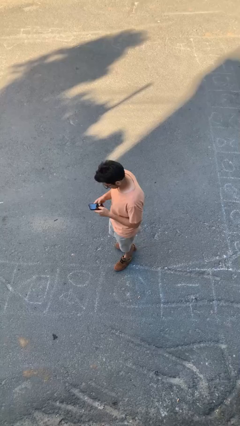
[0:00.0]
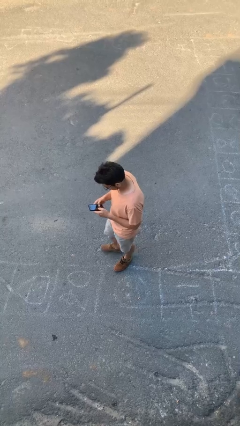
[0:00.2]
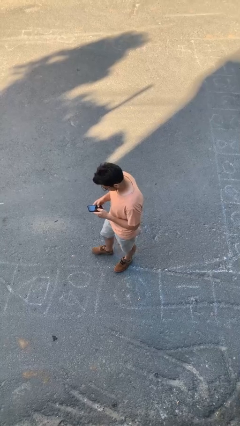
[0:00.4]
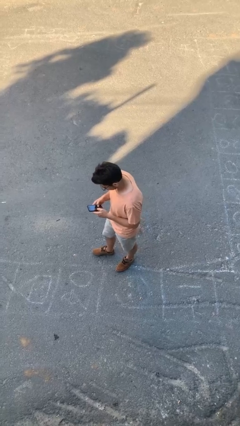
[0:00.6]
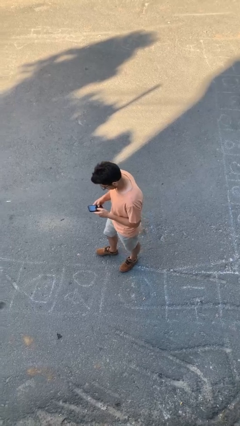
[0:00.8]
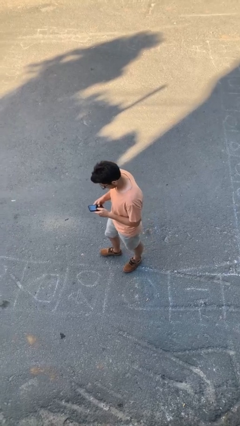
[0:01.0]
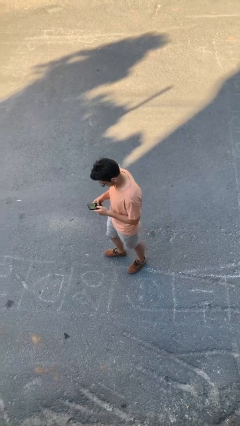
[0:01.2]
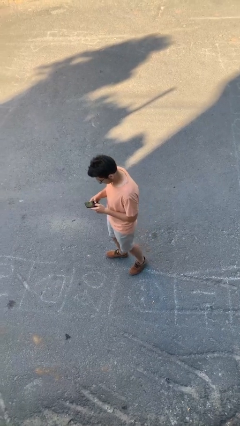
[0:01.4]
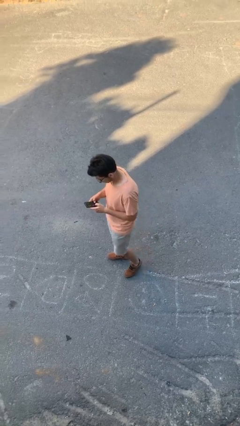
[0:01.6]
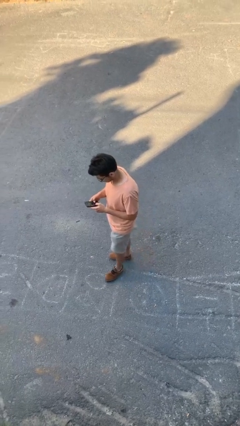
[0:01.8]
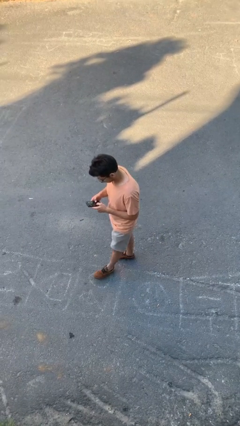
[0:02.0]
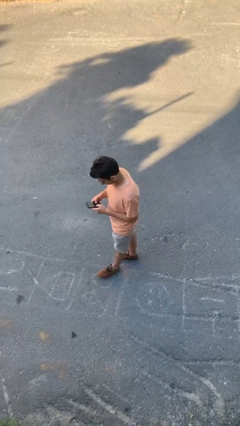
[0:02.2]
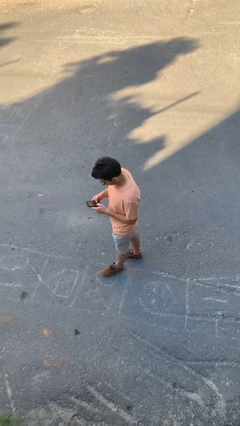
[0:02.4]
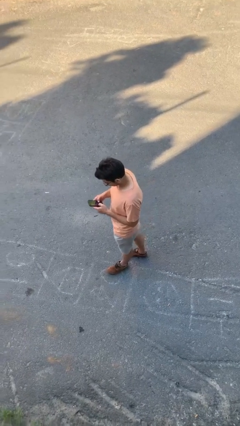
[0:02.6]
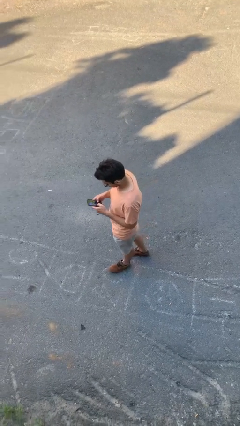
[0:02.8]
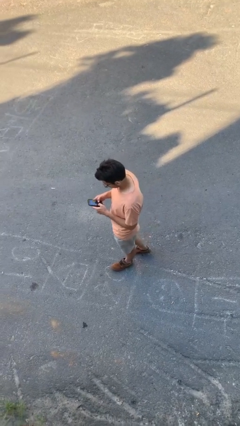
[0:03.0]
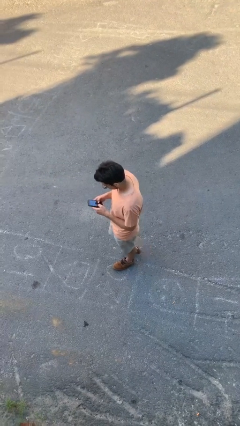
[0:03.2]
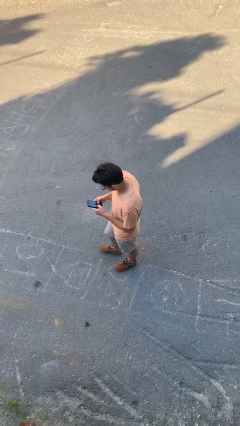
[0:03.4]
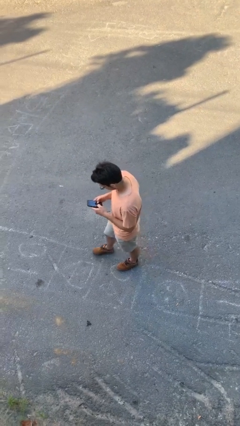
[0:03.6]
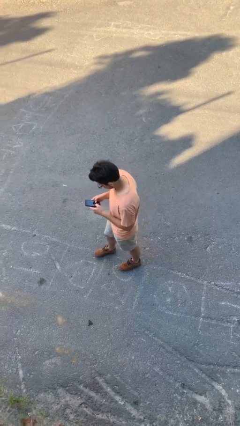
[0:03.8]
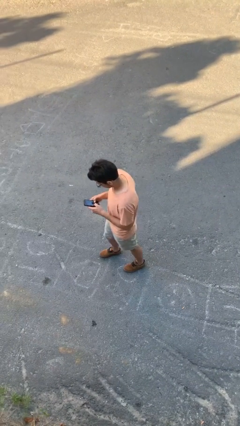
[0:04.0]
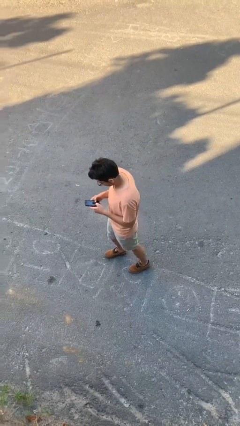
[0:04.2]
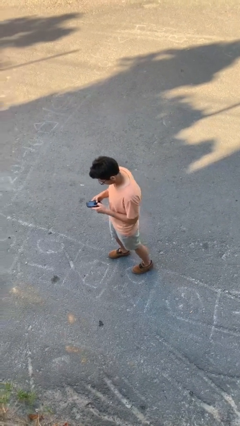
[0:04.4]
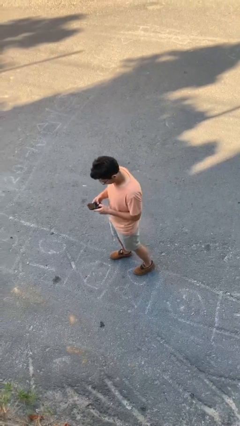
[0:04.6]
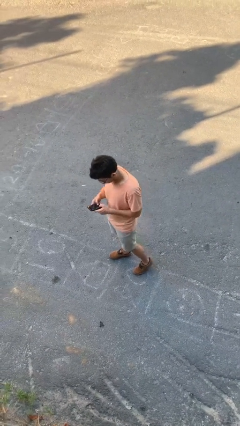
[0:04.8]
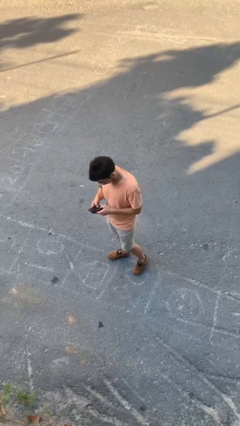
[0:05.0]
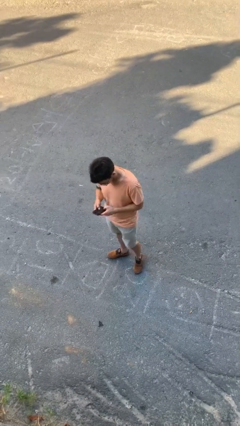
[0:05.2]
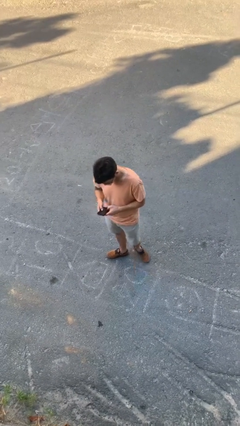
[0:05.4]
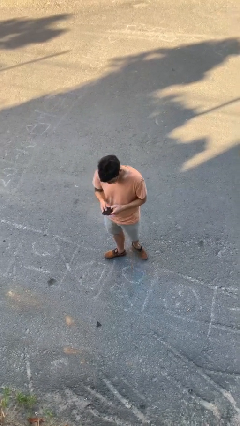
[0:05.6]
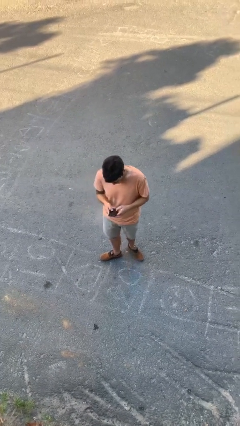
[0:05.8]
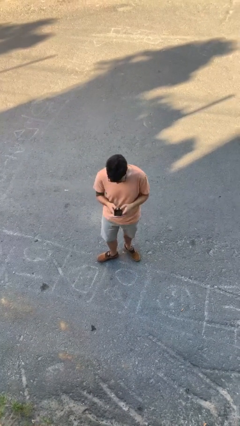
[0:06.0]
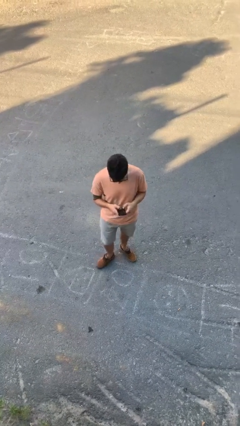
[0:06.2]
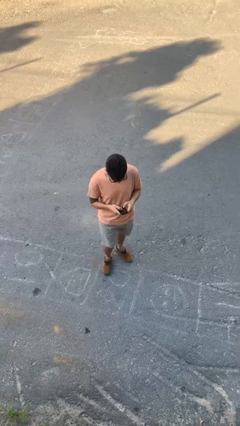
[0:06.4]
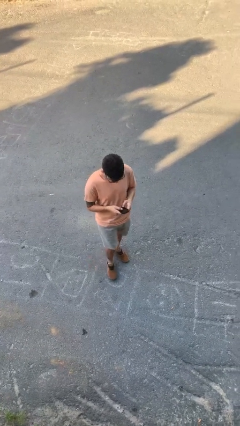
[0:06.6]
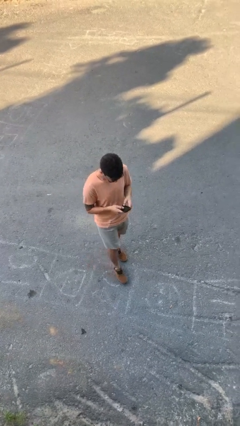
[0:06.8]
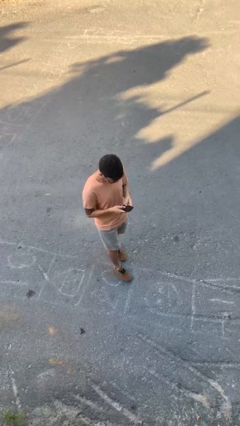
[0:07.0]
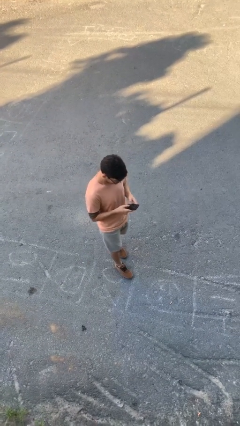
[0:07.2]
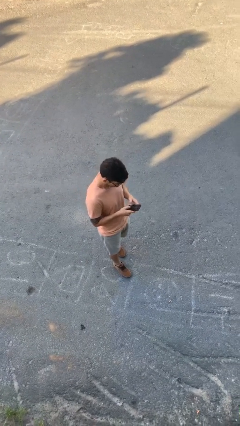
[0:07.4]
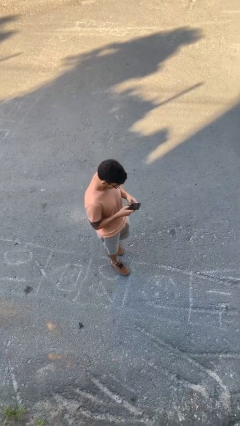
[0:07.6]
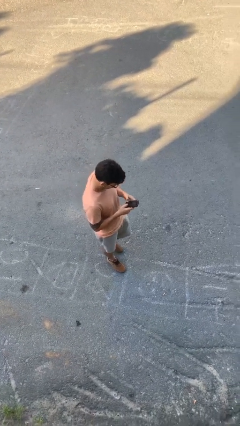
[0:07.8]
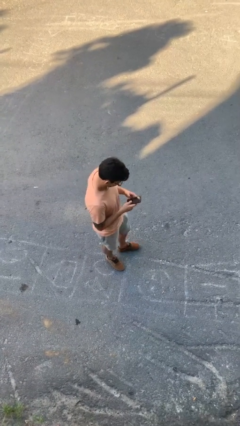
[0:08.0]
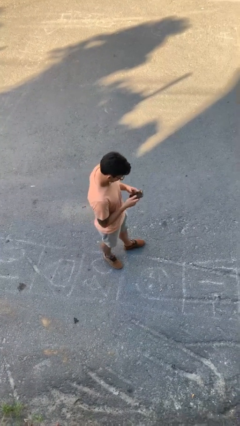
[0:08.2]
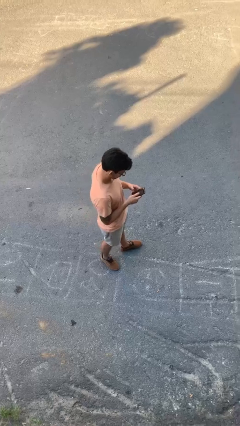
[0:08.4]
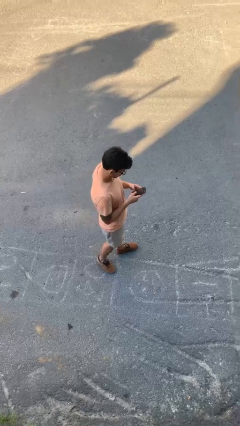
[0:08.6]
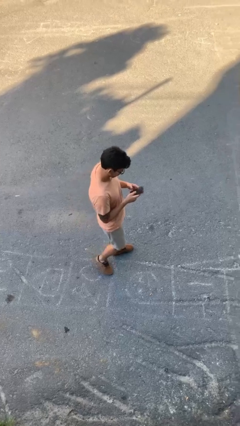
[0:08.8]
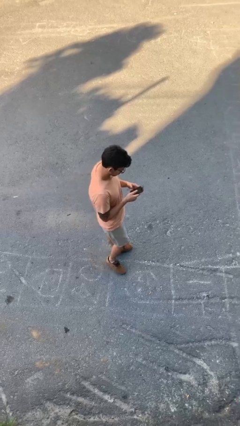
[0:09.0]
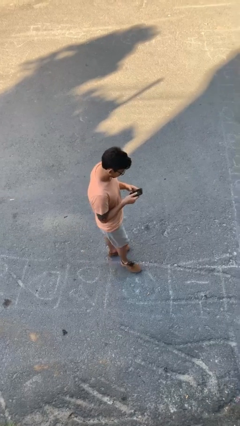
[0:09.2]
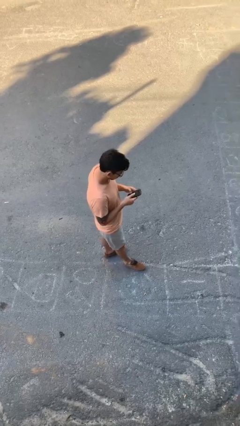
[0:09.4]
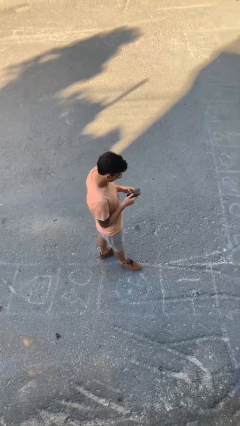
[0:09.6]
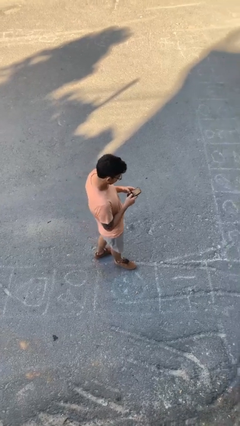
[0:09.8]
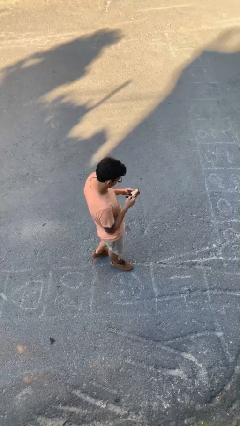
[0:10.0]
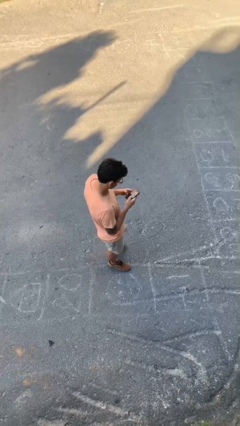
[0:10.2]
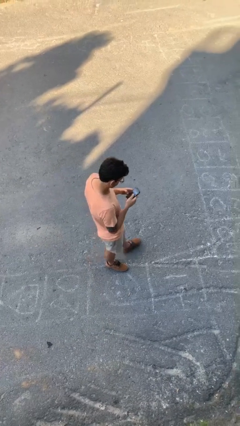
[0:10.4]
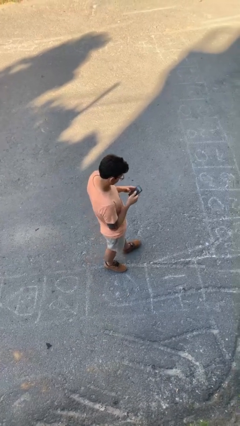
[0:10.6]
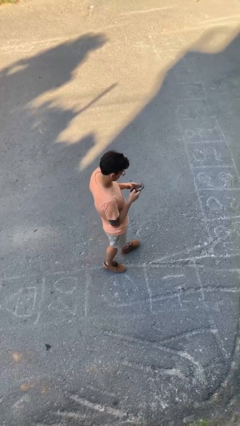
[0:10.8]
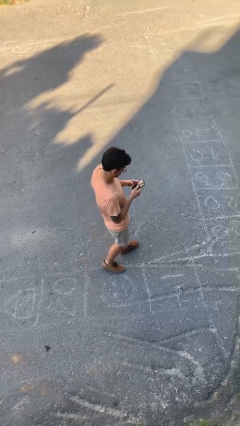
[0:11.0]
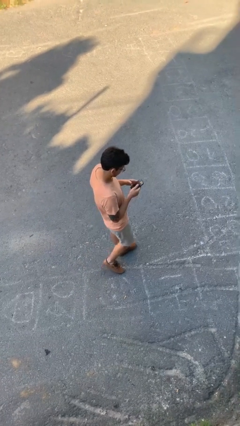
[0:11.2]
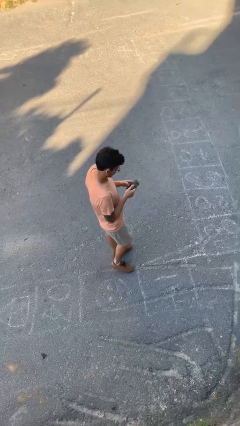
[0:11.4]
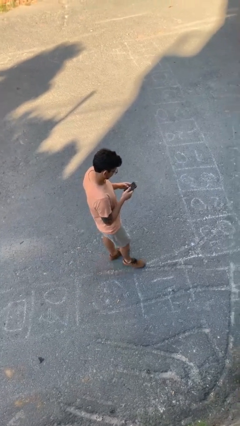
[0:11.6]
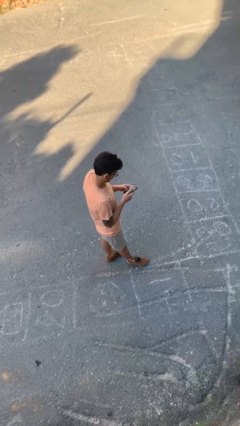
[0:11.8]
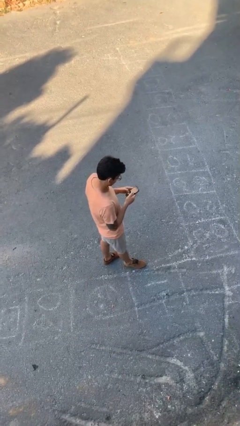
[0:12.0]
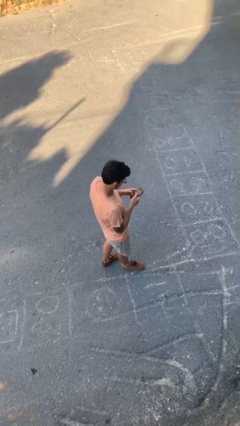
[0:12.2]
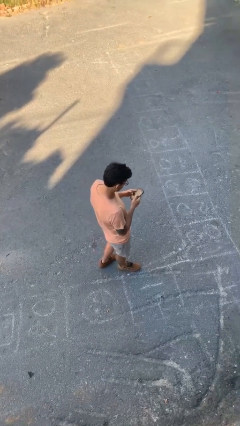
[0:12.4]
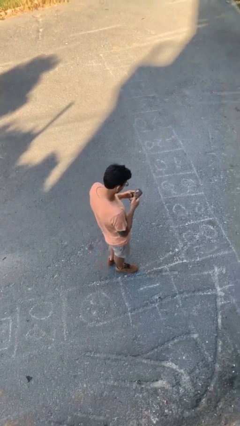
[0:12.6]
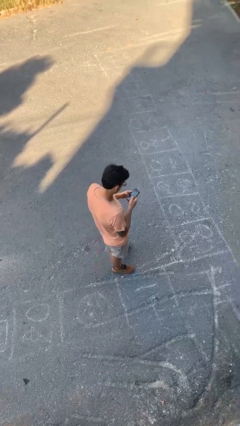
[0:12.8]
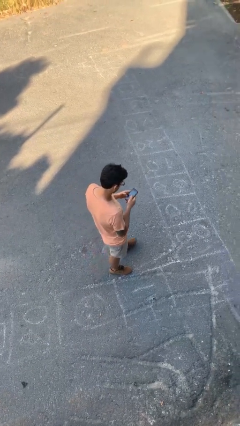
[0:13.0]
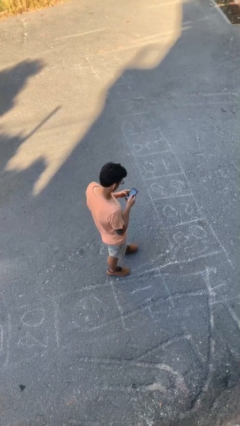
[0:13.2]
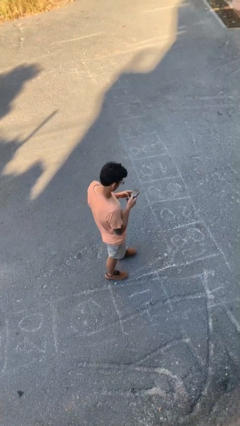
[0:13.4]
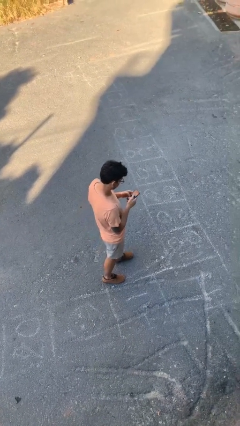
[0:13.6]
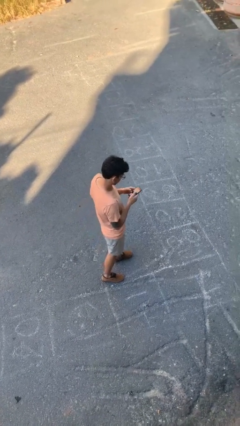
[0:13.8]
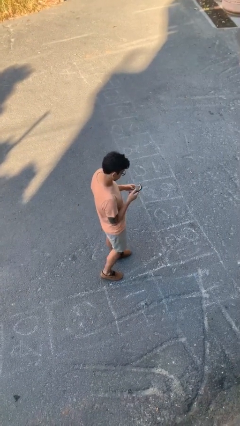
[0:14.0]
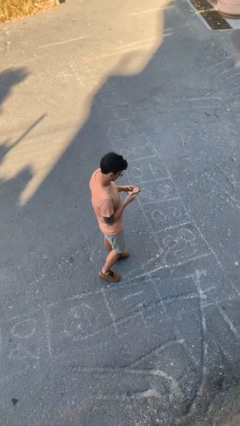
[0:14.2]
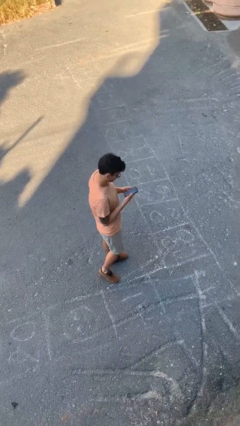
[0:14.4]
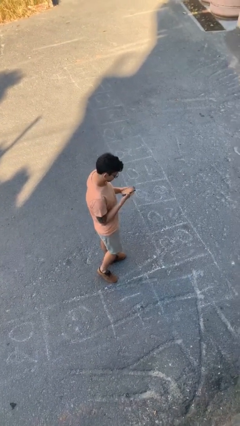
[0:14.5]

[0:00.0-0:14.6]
person texts on phone

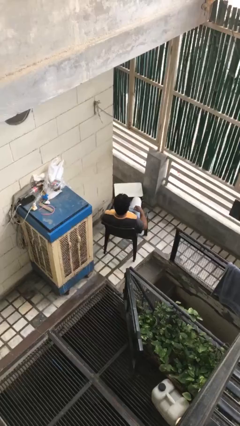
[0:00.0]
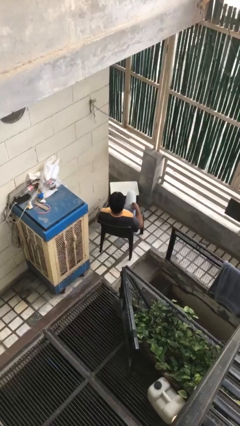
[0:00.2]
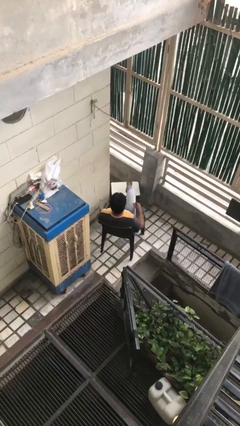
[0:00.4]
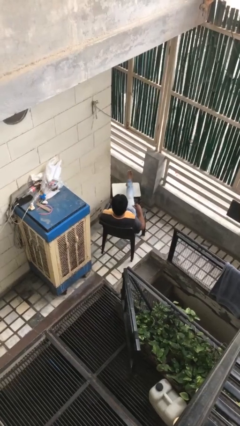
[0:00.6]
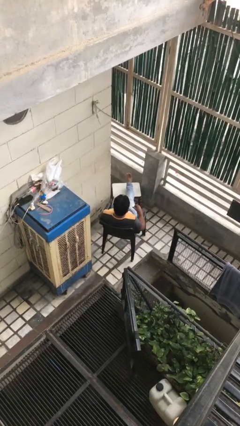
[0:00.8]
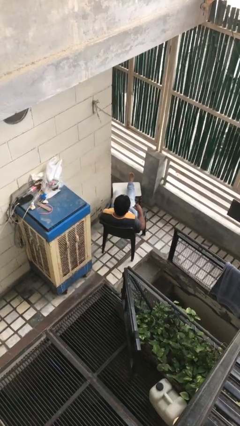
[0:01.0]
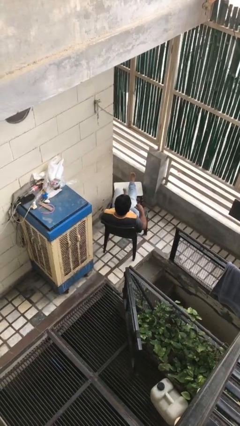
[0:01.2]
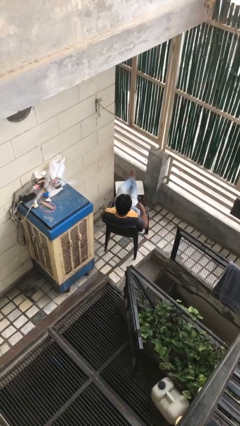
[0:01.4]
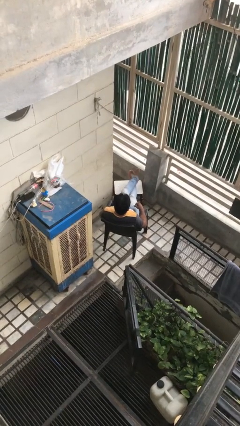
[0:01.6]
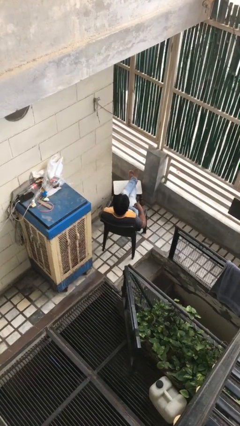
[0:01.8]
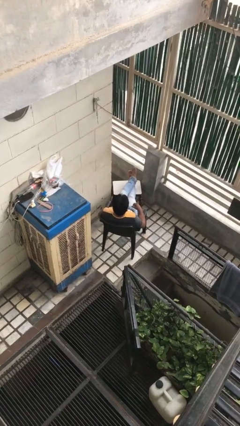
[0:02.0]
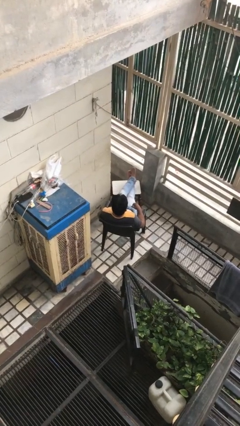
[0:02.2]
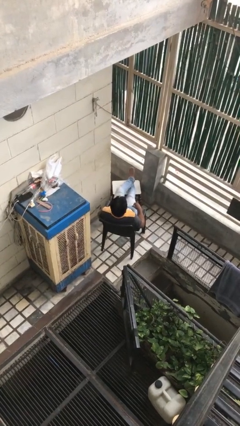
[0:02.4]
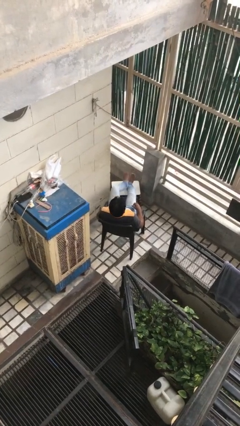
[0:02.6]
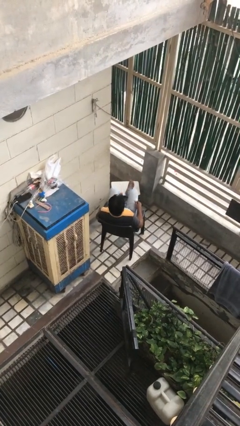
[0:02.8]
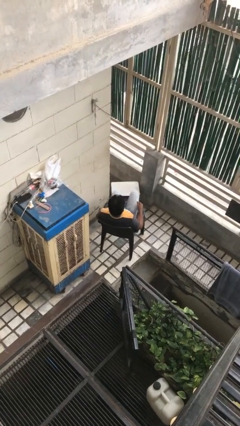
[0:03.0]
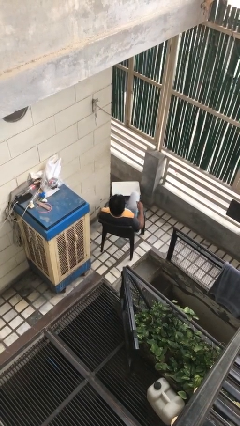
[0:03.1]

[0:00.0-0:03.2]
person puts feet up

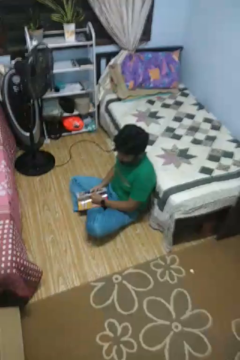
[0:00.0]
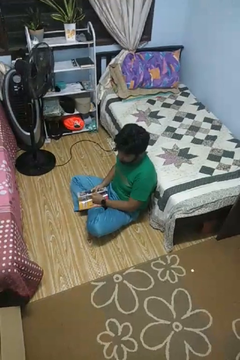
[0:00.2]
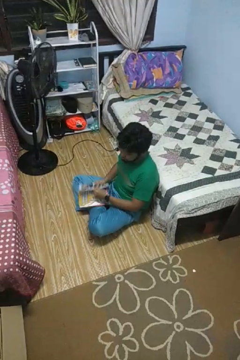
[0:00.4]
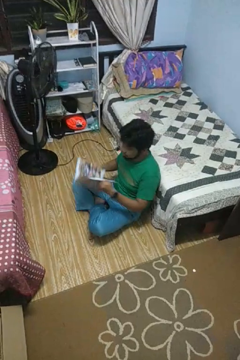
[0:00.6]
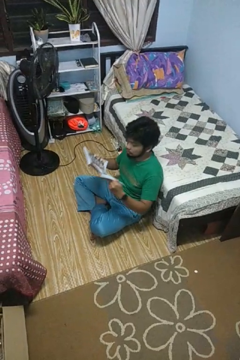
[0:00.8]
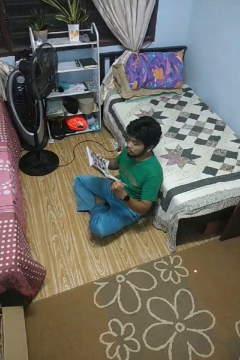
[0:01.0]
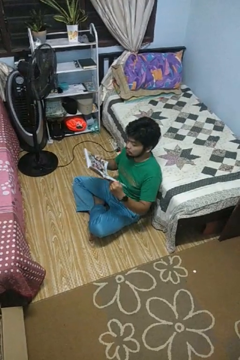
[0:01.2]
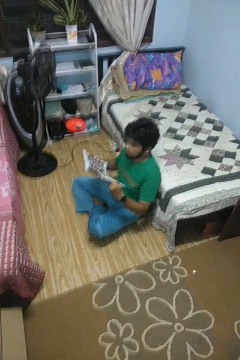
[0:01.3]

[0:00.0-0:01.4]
person reads magazine
